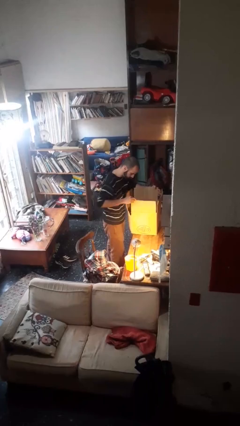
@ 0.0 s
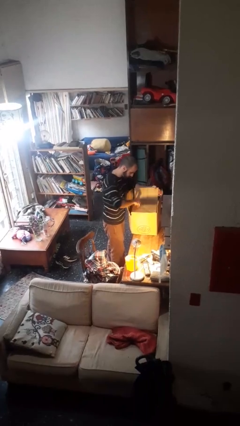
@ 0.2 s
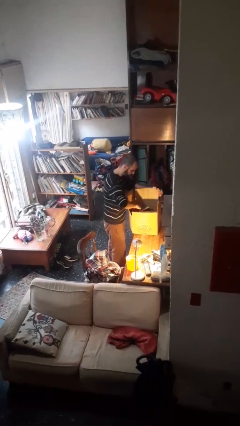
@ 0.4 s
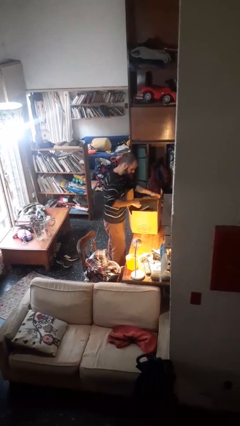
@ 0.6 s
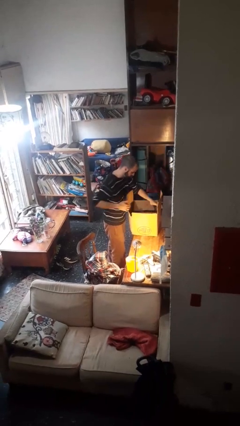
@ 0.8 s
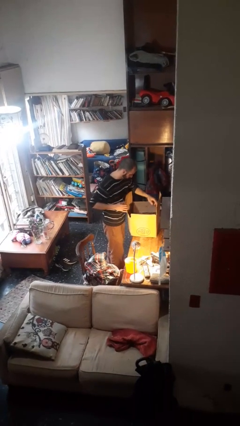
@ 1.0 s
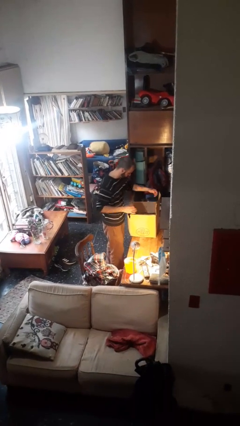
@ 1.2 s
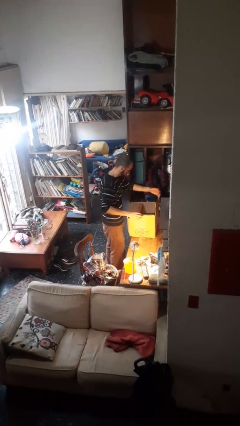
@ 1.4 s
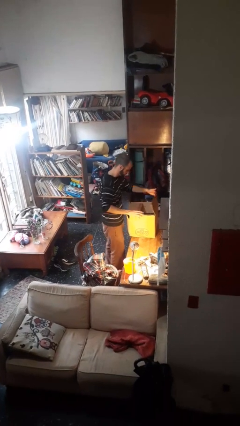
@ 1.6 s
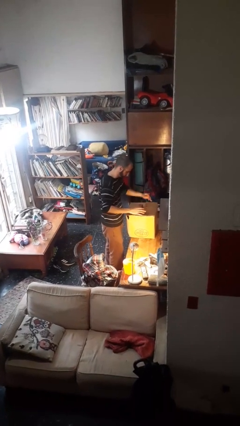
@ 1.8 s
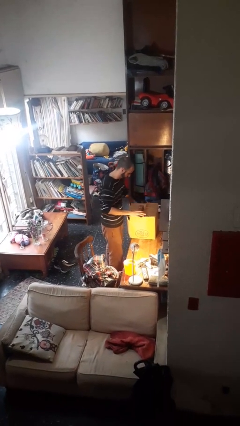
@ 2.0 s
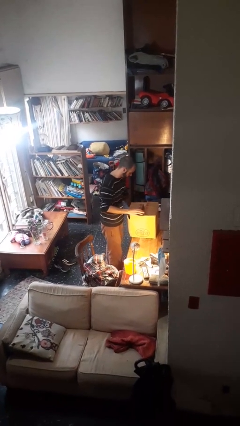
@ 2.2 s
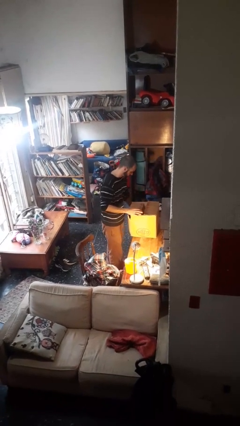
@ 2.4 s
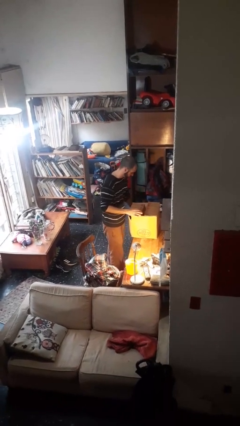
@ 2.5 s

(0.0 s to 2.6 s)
person closes box

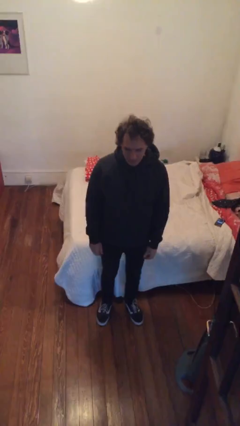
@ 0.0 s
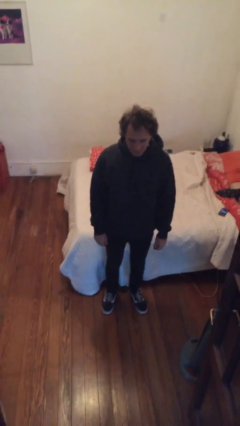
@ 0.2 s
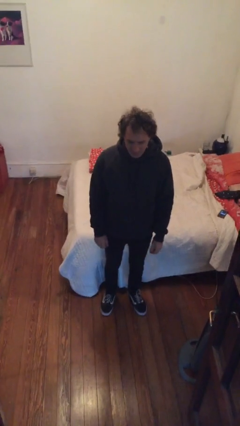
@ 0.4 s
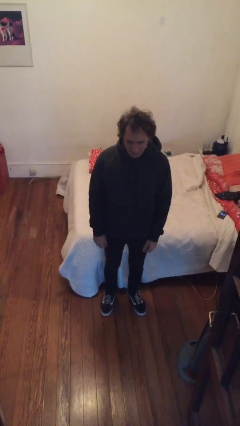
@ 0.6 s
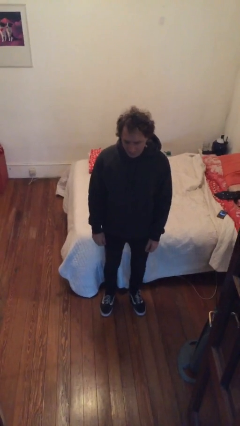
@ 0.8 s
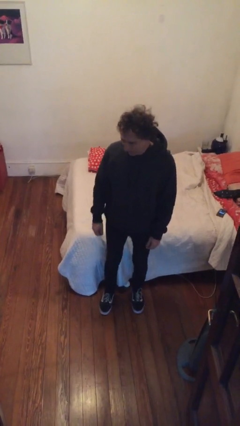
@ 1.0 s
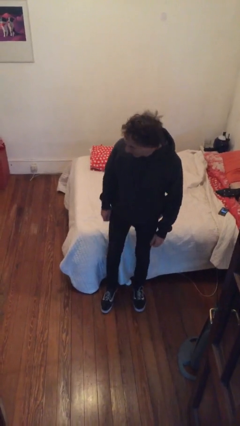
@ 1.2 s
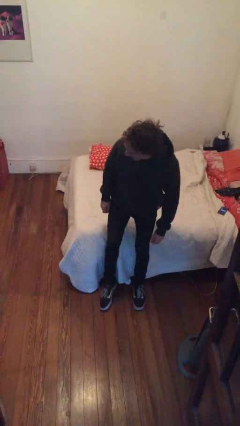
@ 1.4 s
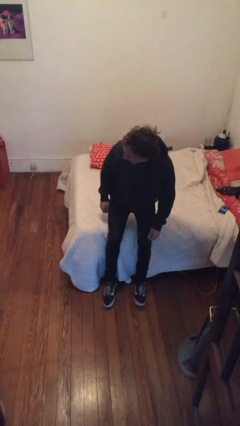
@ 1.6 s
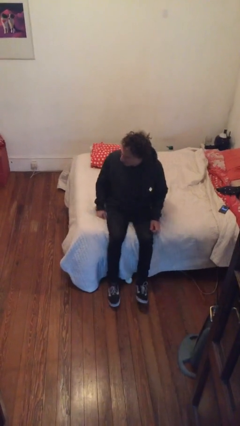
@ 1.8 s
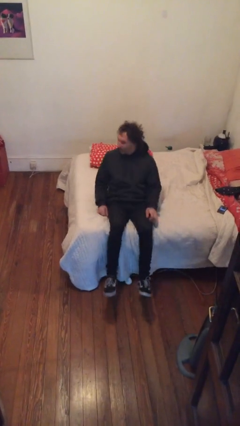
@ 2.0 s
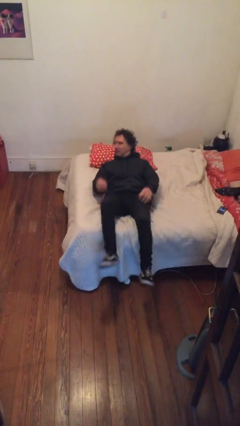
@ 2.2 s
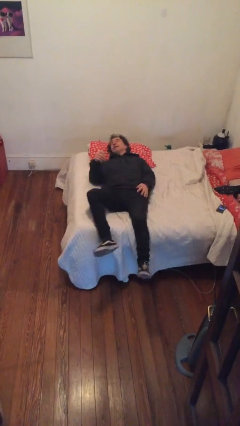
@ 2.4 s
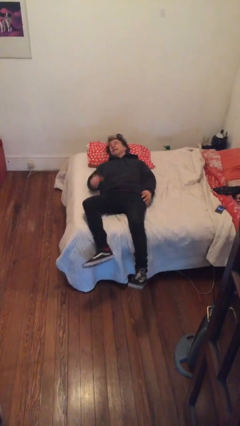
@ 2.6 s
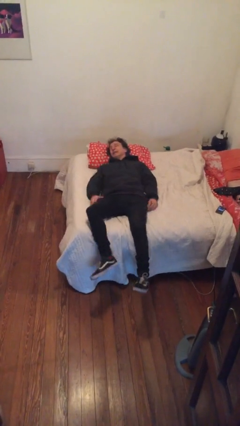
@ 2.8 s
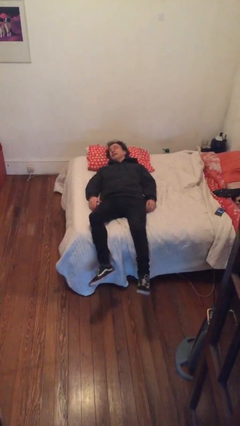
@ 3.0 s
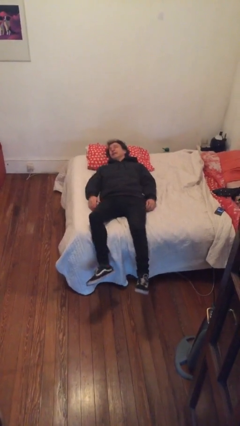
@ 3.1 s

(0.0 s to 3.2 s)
person lies down on bed

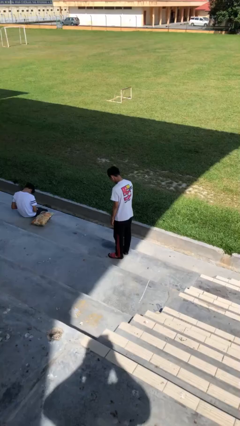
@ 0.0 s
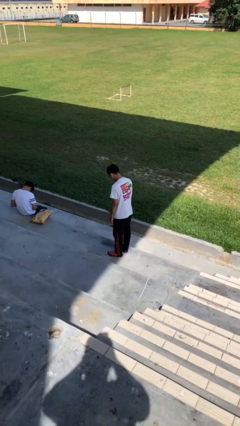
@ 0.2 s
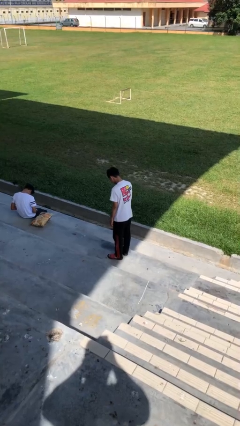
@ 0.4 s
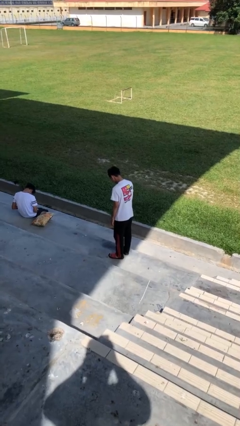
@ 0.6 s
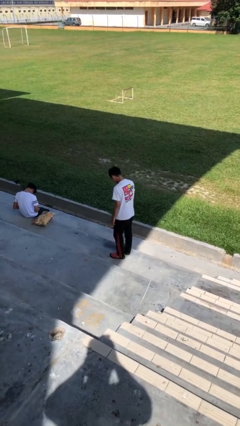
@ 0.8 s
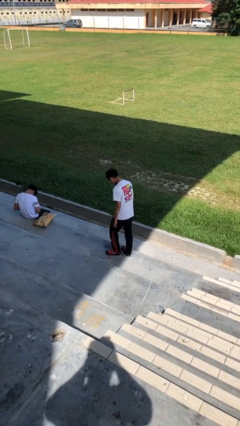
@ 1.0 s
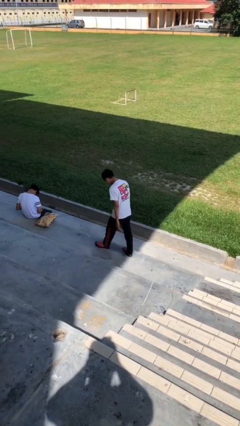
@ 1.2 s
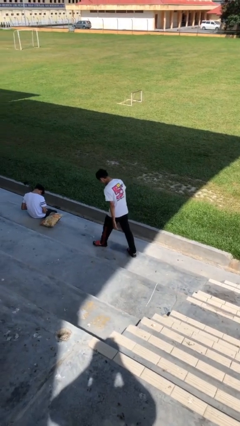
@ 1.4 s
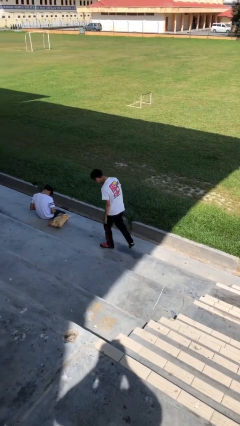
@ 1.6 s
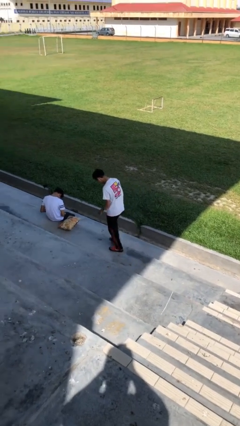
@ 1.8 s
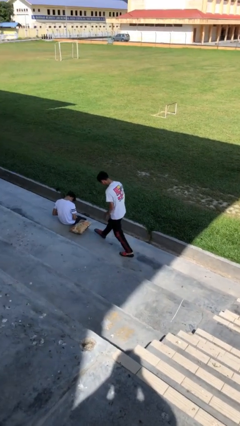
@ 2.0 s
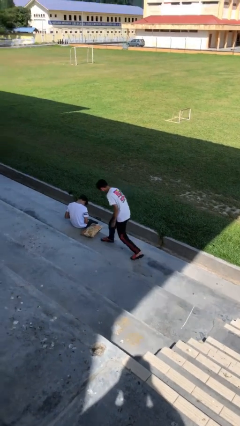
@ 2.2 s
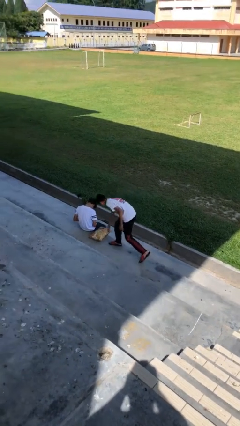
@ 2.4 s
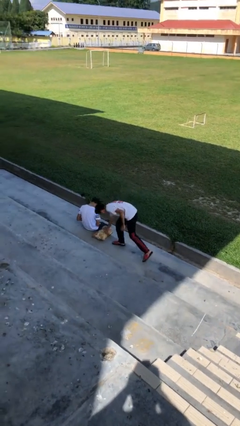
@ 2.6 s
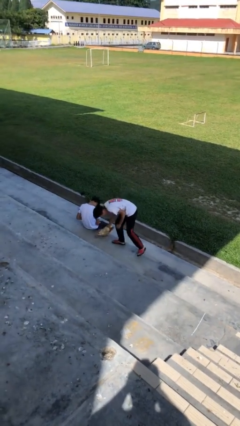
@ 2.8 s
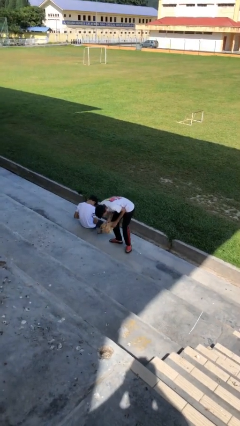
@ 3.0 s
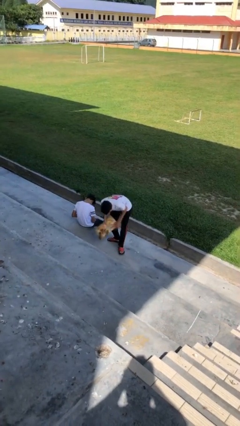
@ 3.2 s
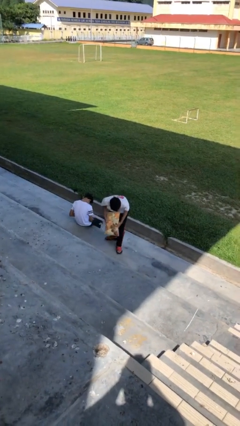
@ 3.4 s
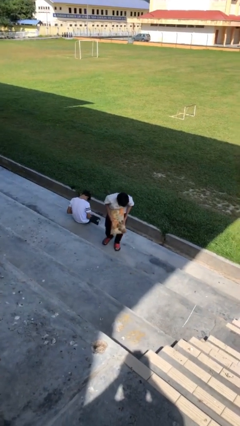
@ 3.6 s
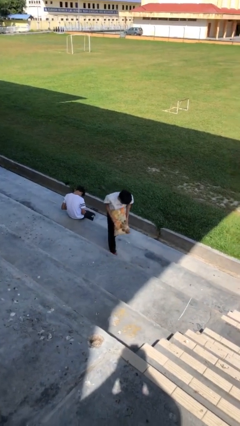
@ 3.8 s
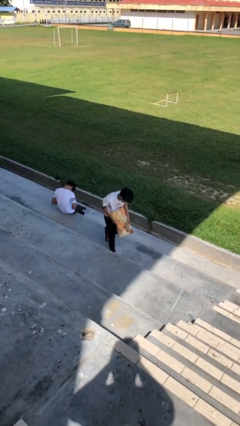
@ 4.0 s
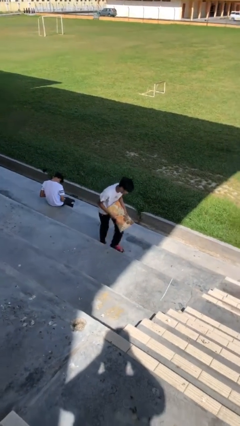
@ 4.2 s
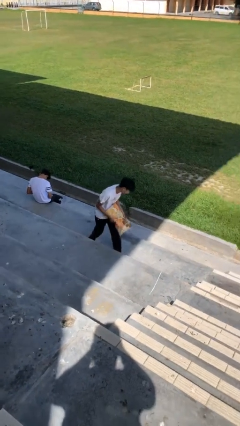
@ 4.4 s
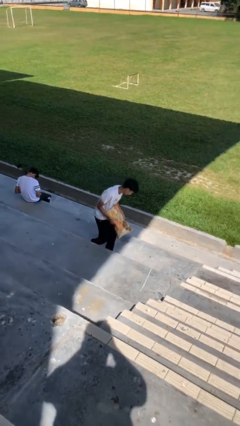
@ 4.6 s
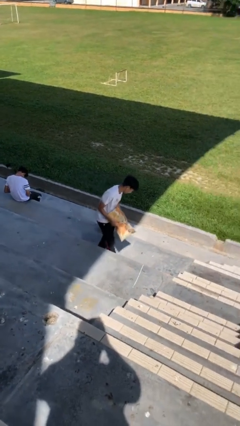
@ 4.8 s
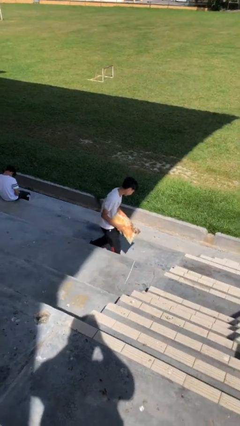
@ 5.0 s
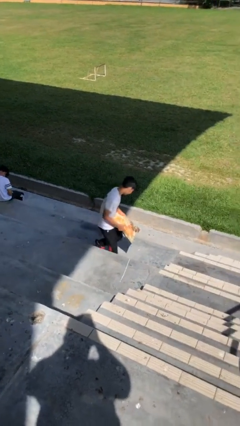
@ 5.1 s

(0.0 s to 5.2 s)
person steals object from person

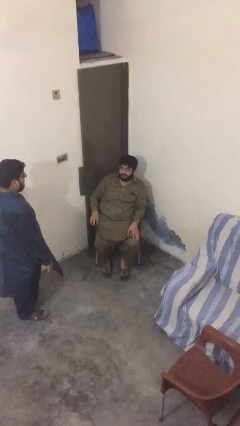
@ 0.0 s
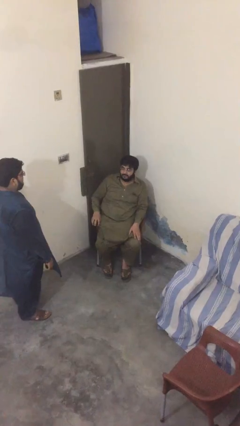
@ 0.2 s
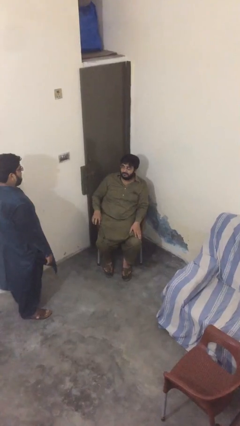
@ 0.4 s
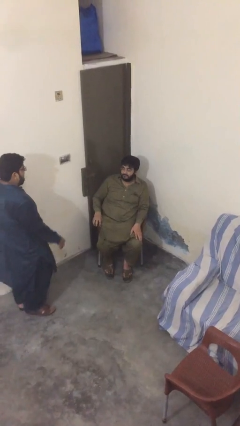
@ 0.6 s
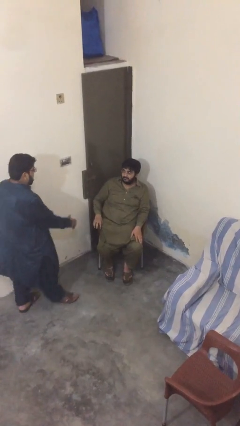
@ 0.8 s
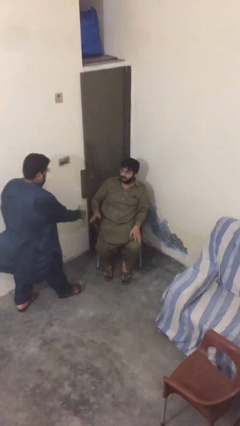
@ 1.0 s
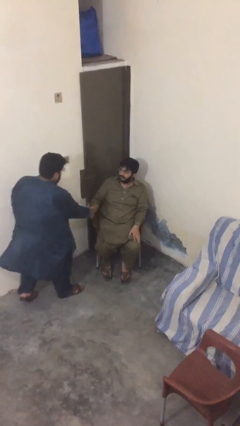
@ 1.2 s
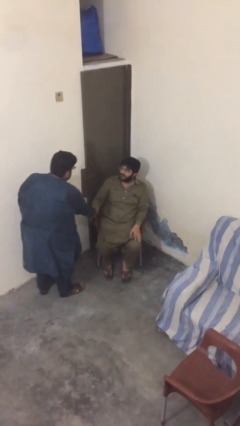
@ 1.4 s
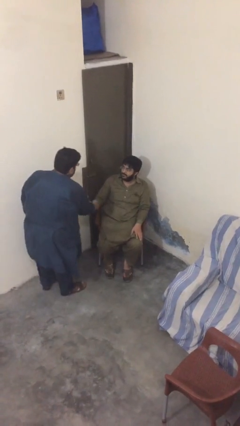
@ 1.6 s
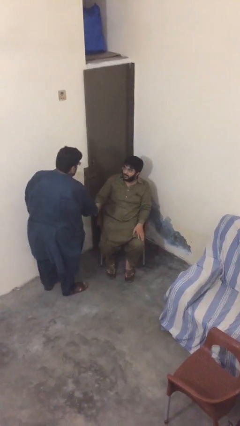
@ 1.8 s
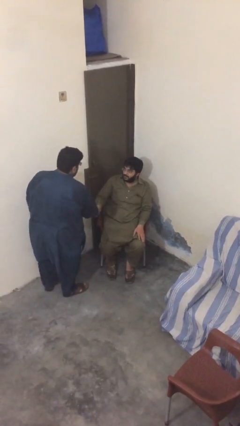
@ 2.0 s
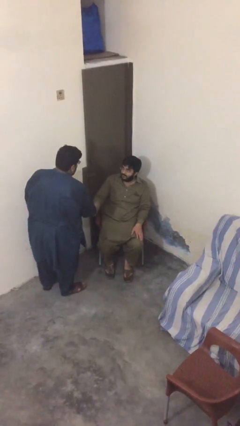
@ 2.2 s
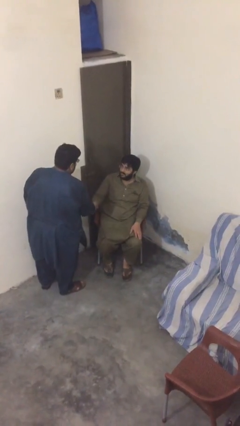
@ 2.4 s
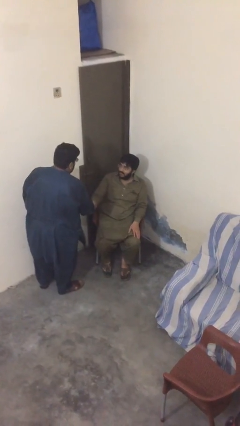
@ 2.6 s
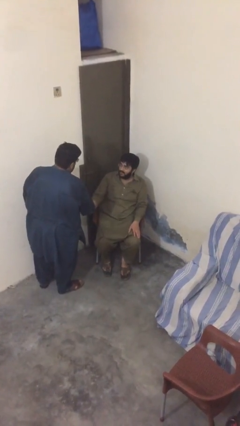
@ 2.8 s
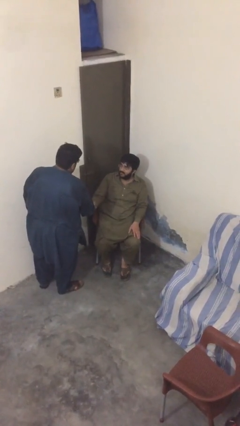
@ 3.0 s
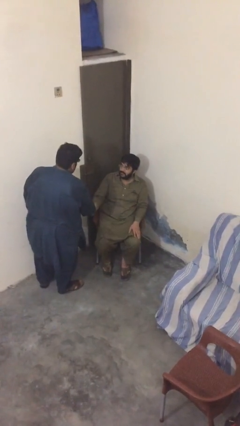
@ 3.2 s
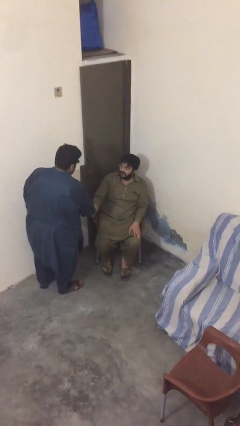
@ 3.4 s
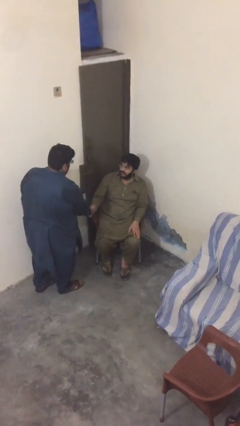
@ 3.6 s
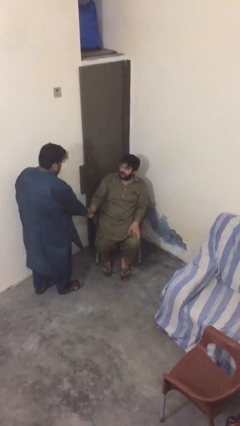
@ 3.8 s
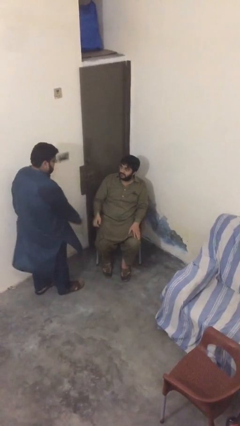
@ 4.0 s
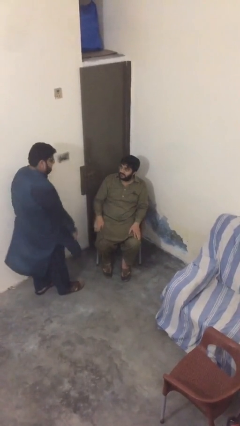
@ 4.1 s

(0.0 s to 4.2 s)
person shakes hand

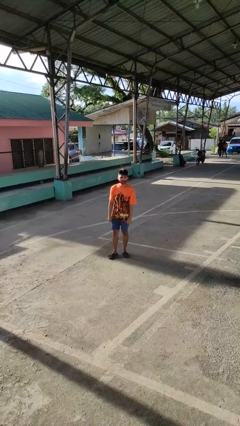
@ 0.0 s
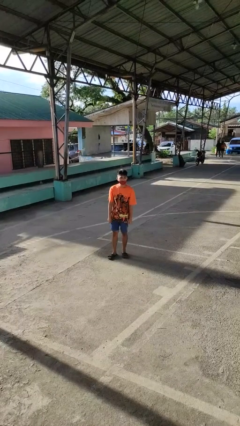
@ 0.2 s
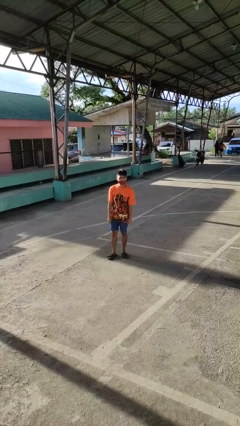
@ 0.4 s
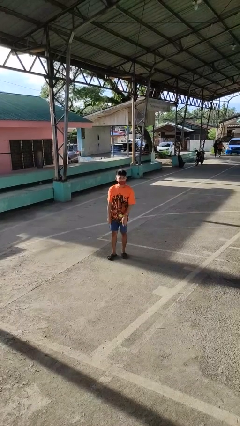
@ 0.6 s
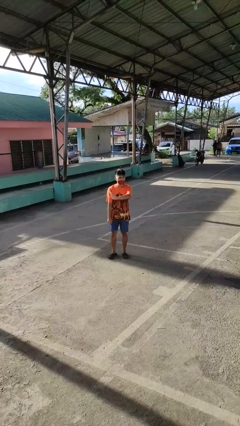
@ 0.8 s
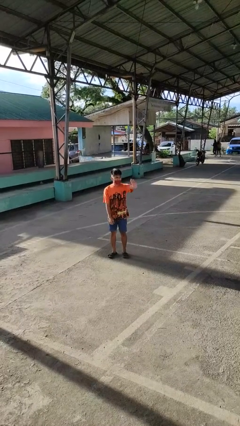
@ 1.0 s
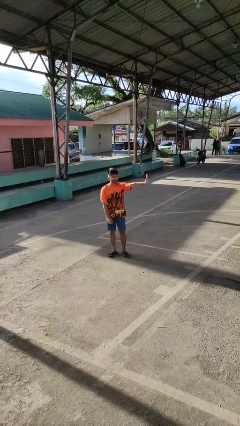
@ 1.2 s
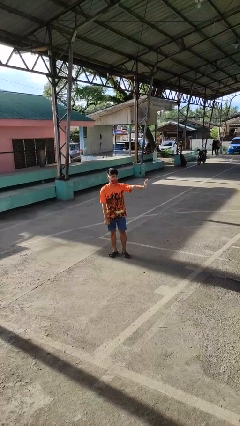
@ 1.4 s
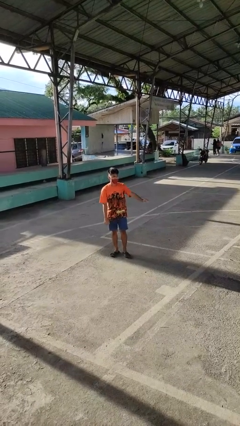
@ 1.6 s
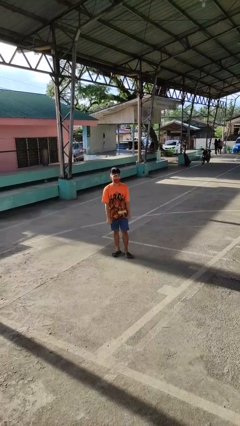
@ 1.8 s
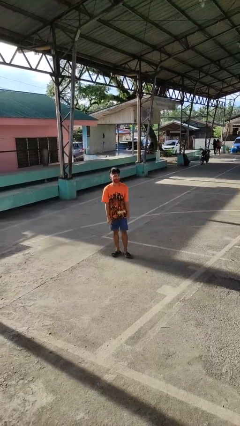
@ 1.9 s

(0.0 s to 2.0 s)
person gestures swipe left

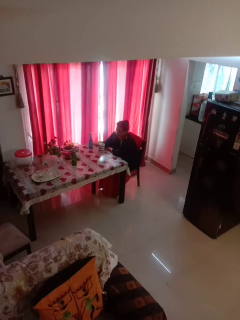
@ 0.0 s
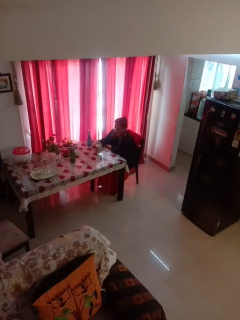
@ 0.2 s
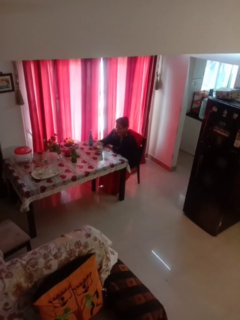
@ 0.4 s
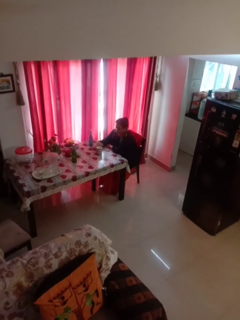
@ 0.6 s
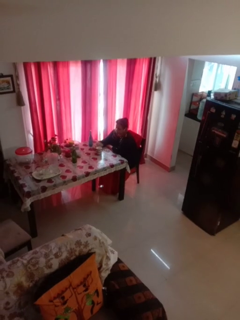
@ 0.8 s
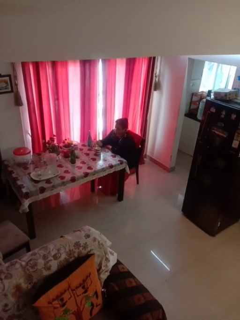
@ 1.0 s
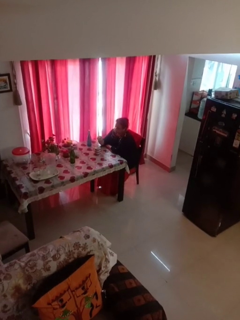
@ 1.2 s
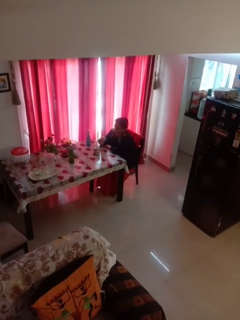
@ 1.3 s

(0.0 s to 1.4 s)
person puts down object on table
